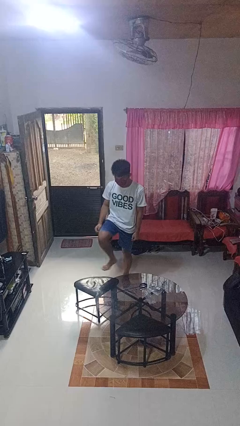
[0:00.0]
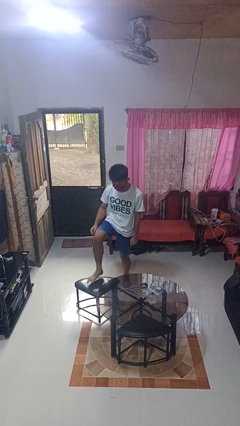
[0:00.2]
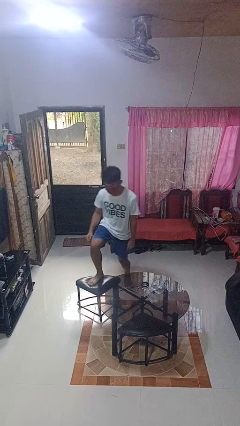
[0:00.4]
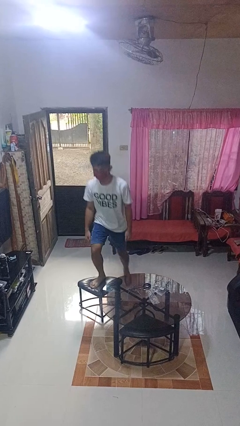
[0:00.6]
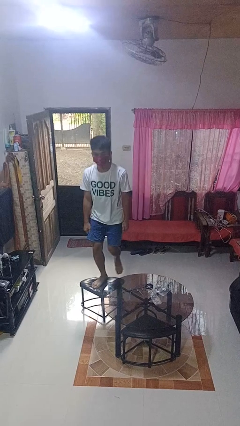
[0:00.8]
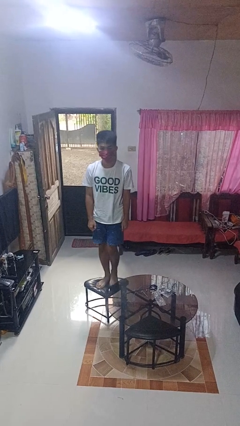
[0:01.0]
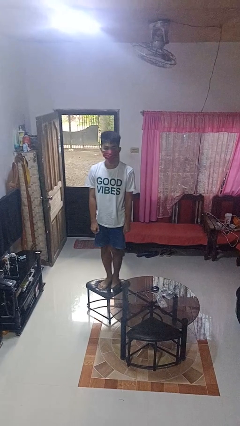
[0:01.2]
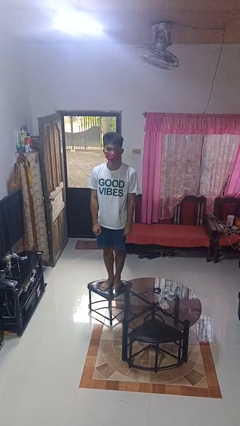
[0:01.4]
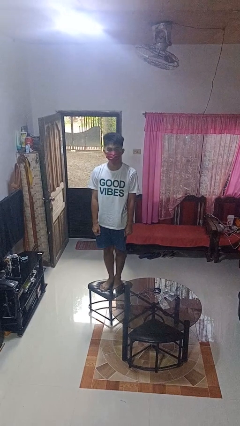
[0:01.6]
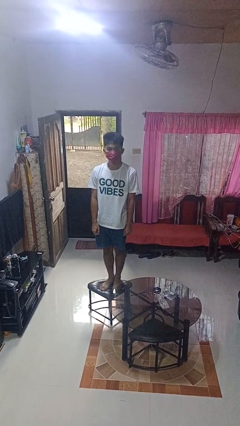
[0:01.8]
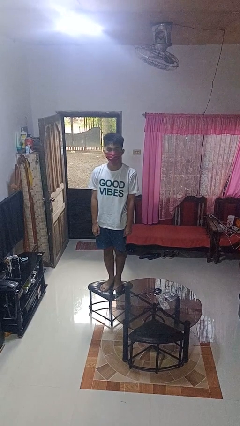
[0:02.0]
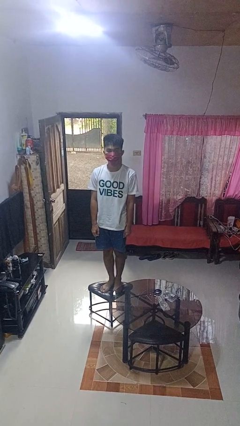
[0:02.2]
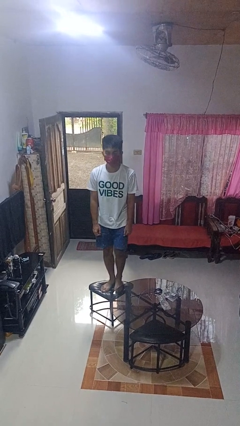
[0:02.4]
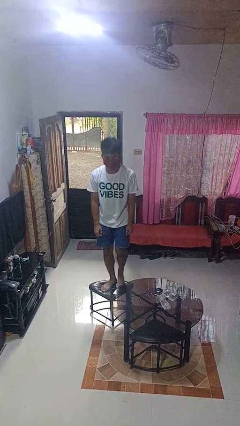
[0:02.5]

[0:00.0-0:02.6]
person climbs on chair

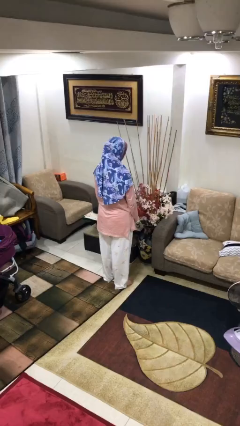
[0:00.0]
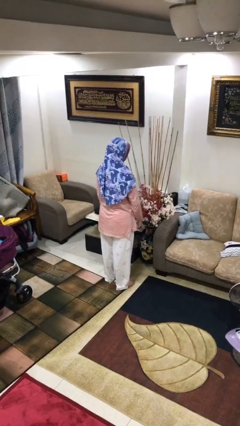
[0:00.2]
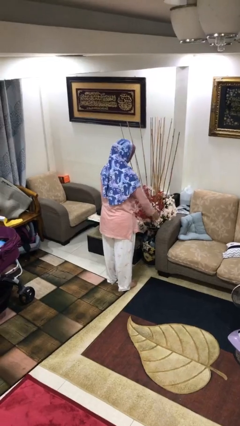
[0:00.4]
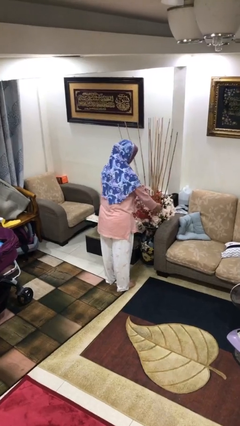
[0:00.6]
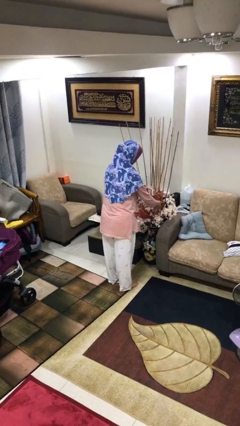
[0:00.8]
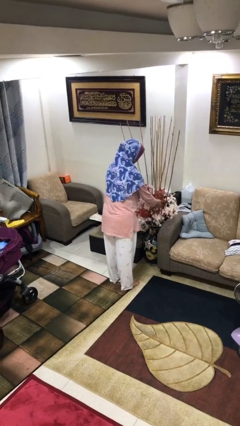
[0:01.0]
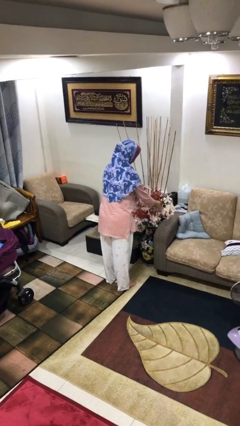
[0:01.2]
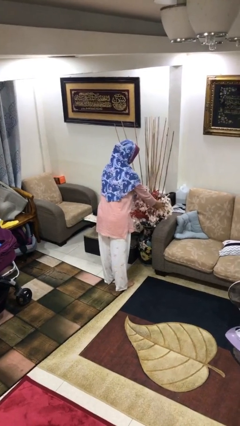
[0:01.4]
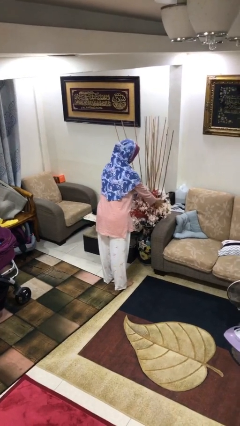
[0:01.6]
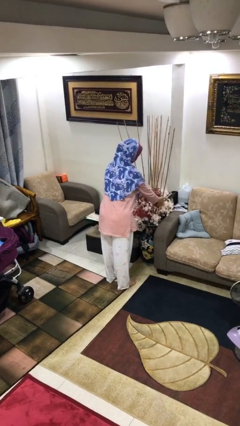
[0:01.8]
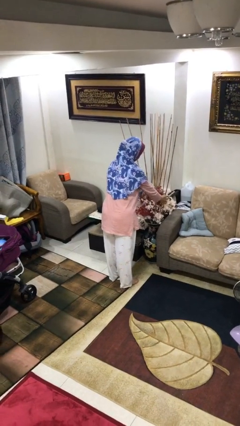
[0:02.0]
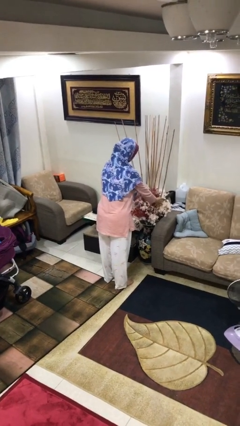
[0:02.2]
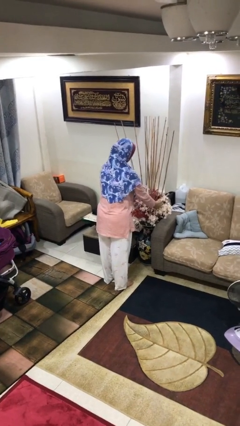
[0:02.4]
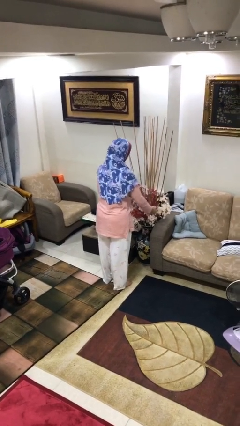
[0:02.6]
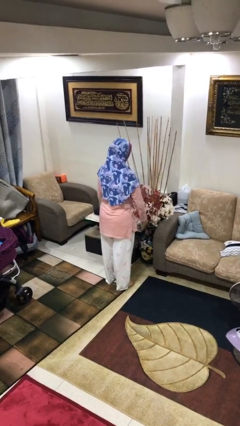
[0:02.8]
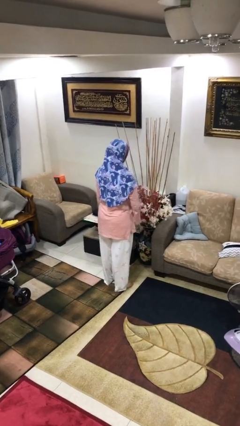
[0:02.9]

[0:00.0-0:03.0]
person arranges flowers in vase

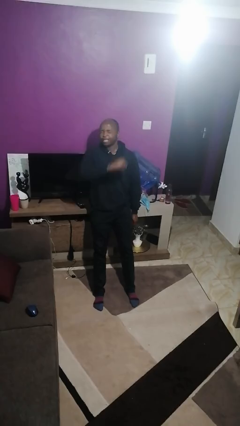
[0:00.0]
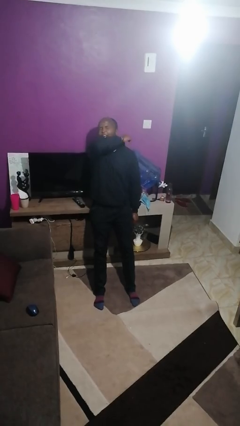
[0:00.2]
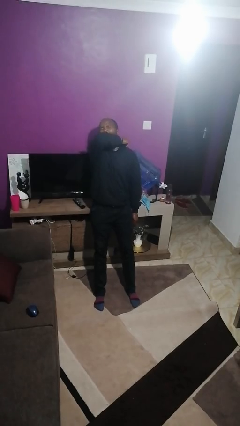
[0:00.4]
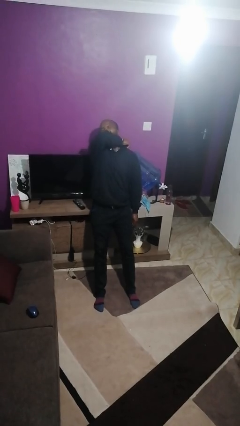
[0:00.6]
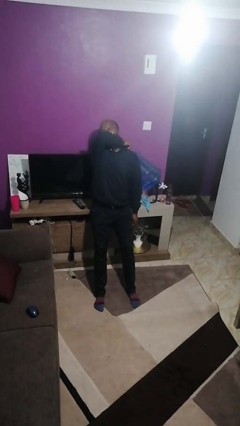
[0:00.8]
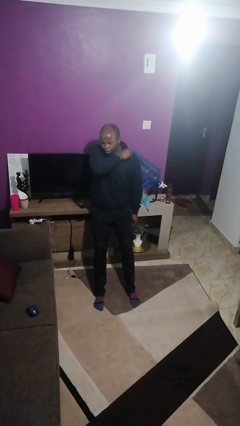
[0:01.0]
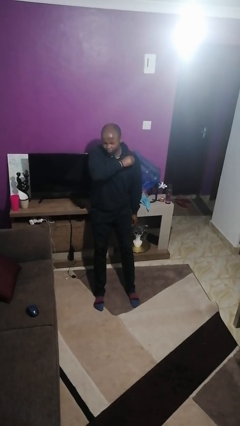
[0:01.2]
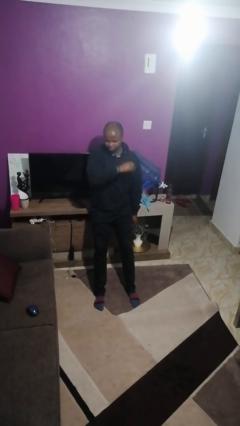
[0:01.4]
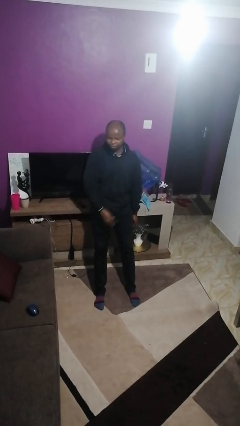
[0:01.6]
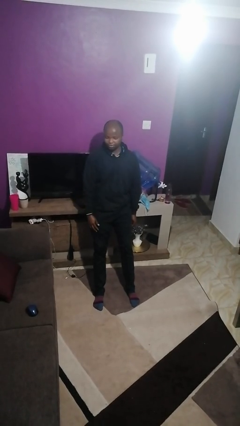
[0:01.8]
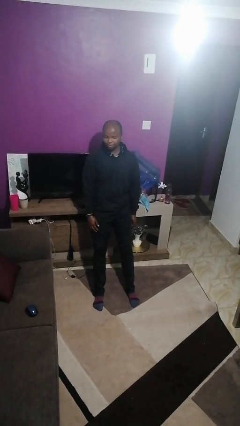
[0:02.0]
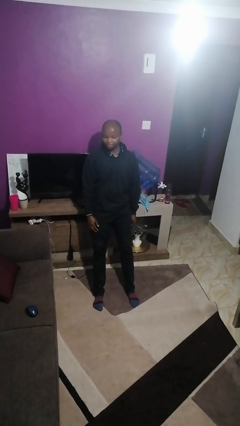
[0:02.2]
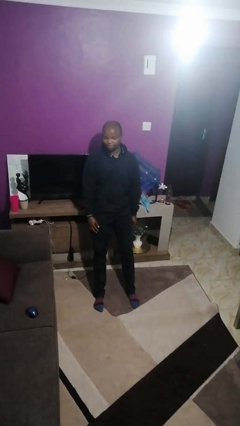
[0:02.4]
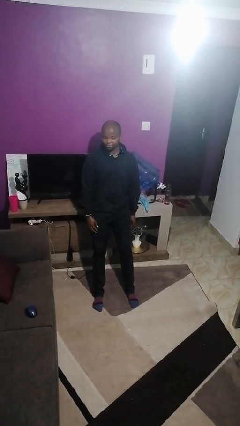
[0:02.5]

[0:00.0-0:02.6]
person sneezes into hand

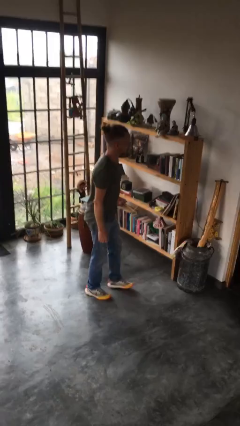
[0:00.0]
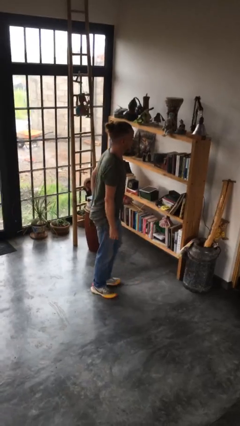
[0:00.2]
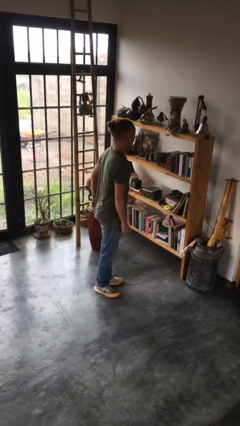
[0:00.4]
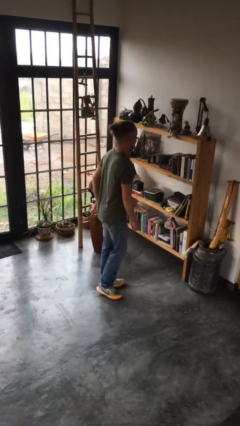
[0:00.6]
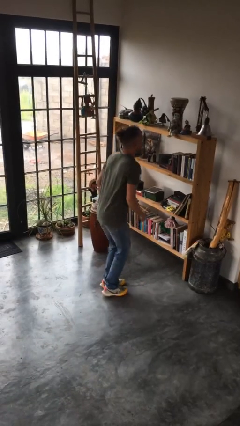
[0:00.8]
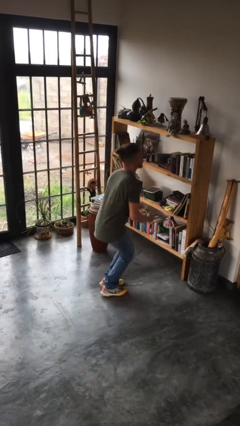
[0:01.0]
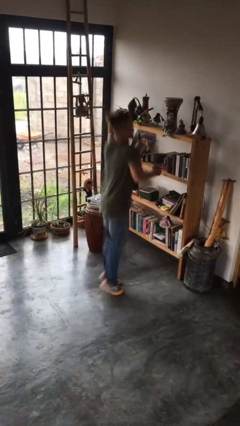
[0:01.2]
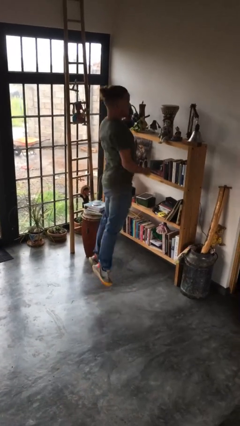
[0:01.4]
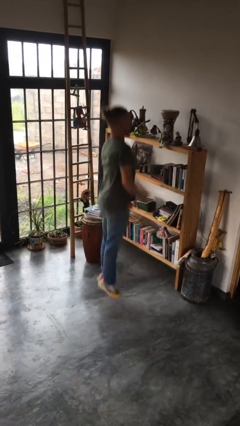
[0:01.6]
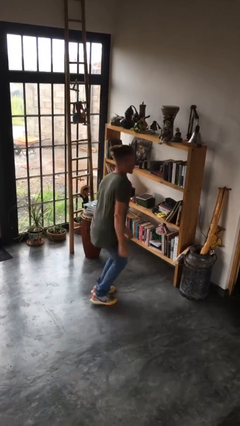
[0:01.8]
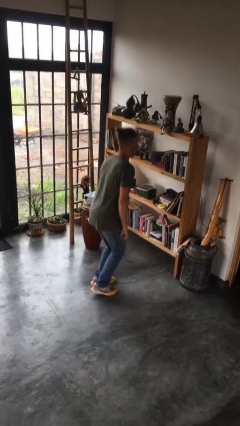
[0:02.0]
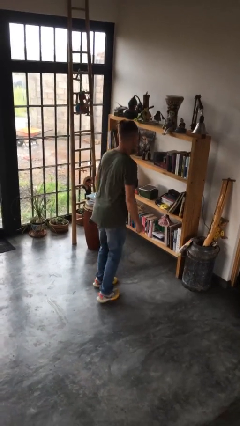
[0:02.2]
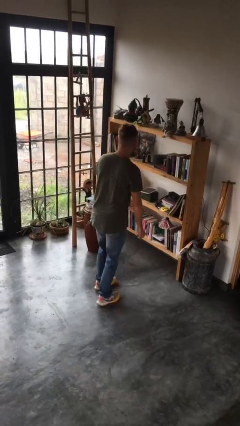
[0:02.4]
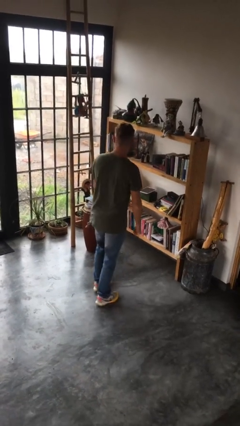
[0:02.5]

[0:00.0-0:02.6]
person jumps

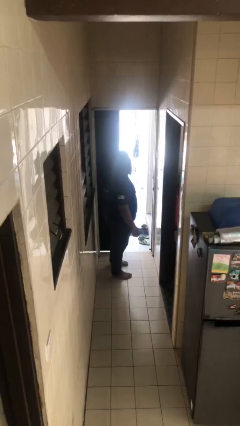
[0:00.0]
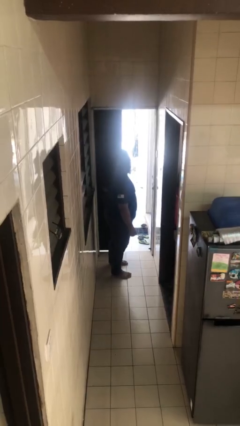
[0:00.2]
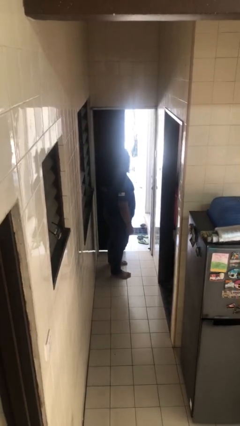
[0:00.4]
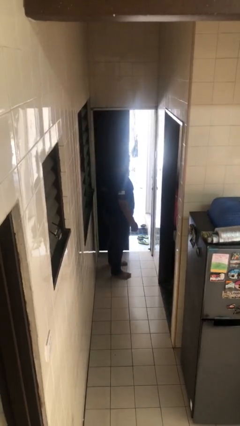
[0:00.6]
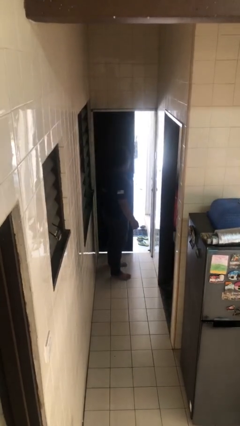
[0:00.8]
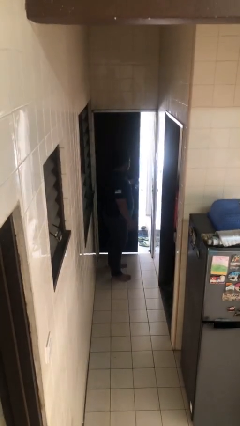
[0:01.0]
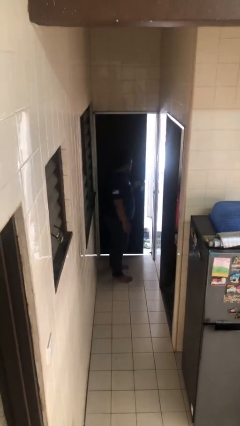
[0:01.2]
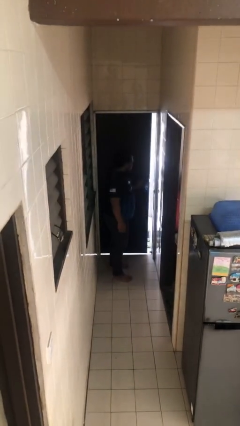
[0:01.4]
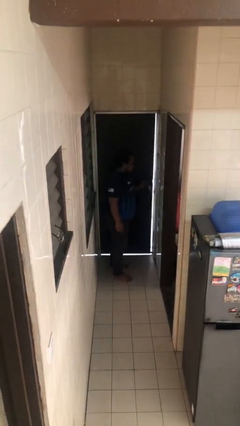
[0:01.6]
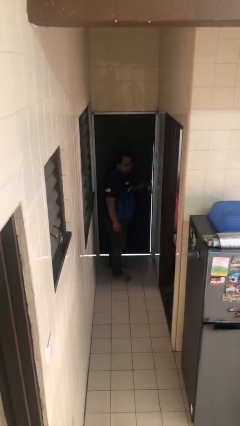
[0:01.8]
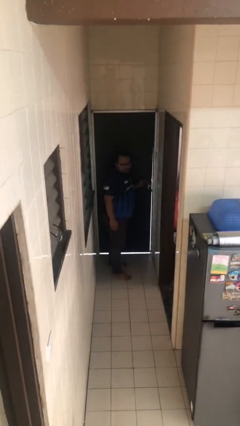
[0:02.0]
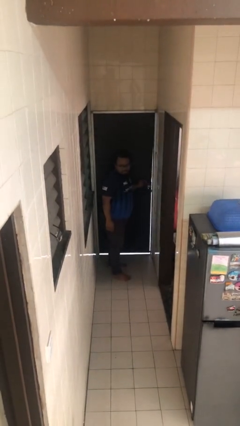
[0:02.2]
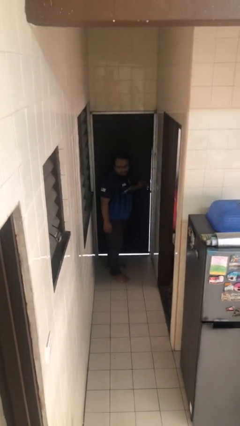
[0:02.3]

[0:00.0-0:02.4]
person closes facility door

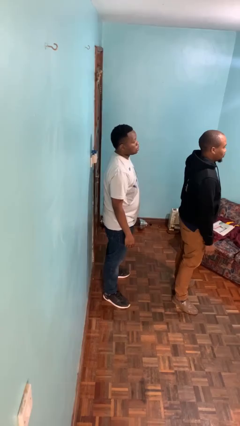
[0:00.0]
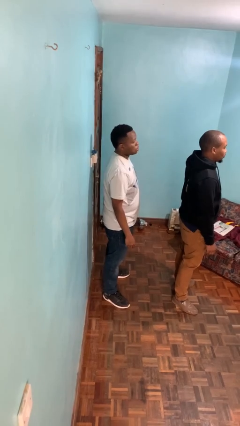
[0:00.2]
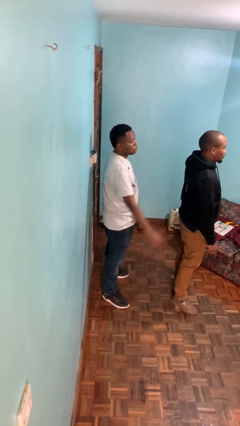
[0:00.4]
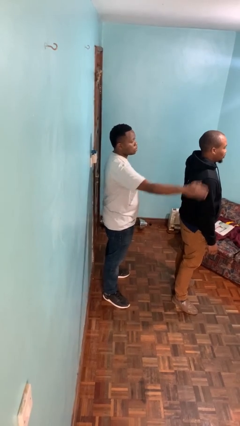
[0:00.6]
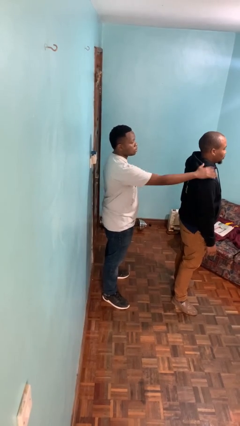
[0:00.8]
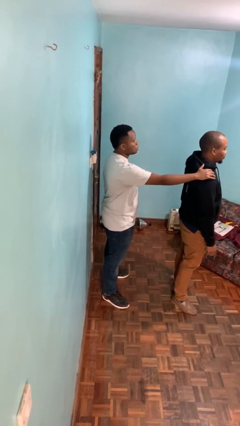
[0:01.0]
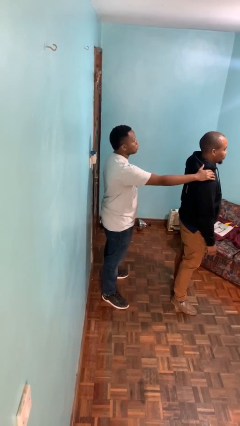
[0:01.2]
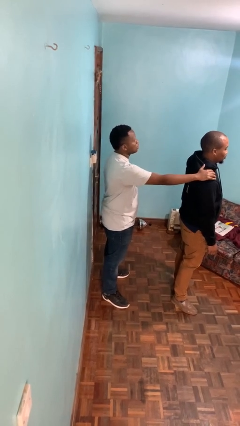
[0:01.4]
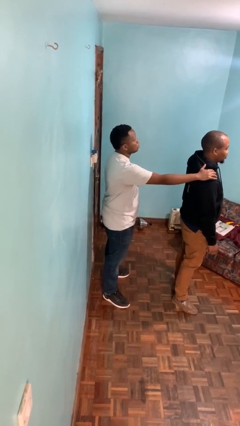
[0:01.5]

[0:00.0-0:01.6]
person grabs person by shoulder

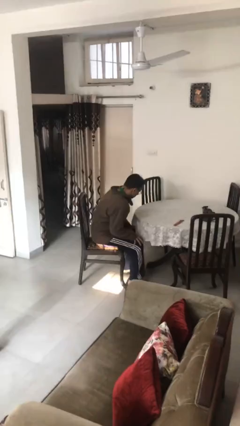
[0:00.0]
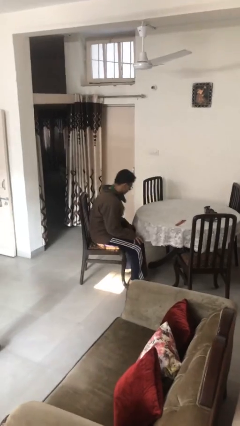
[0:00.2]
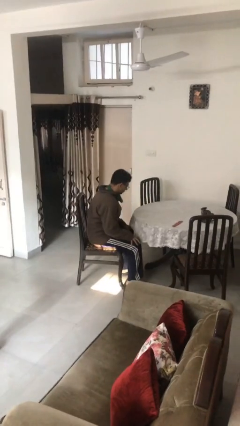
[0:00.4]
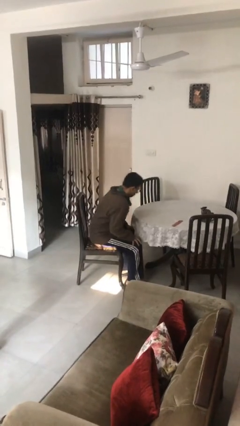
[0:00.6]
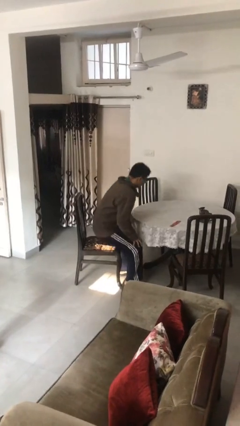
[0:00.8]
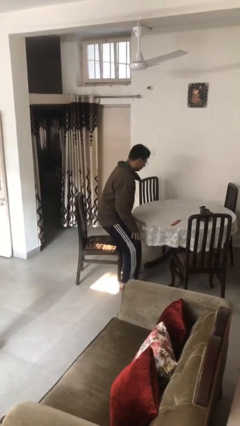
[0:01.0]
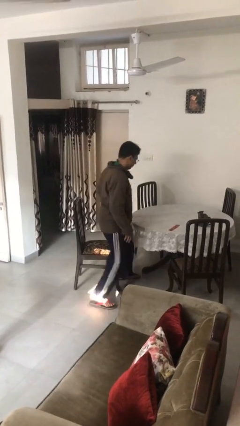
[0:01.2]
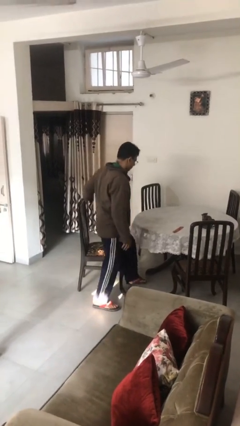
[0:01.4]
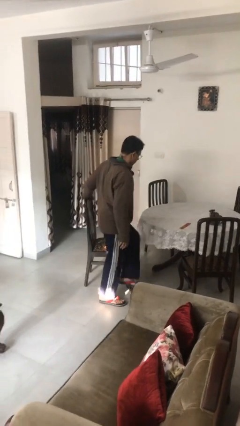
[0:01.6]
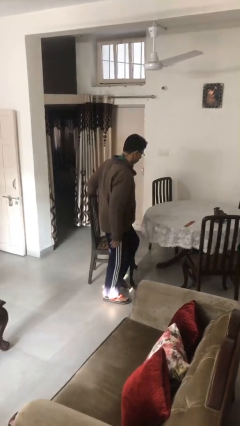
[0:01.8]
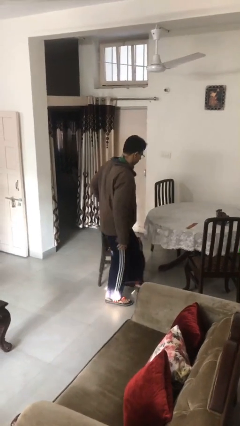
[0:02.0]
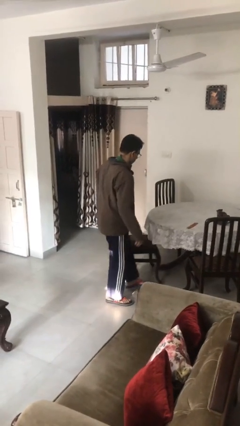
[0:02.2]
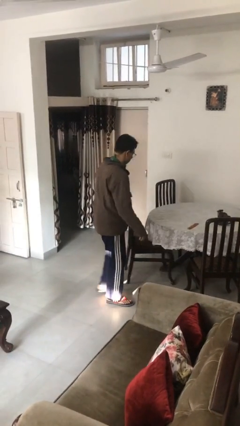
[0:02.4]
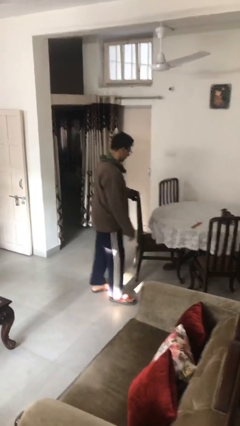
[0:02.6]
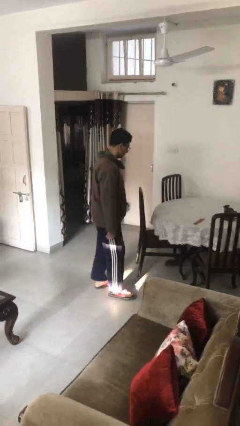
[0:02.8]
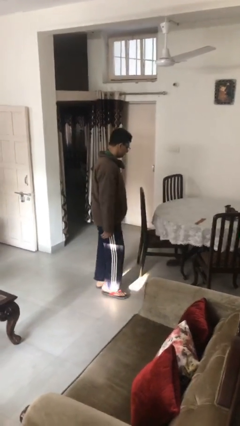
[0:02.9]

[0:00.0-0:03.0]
person stands up
